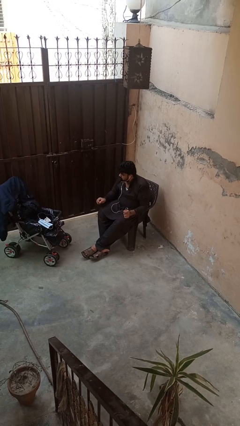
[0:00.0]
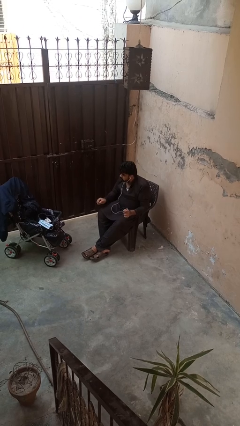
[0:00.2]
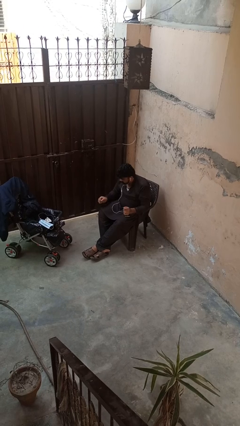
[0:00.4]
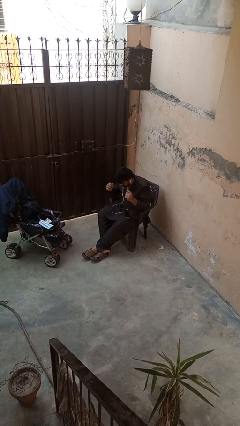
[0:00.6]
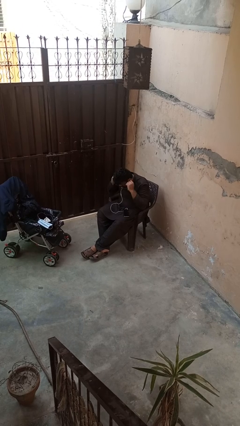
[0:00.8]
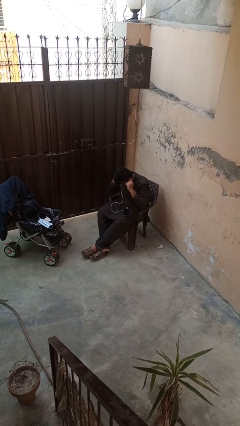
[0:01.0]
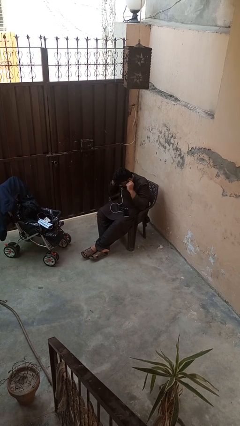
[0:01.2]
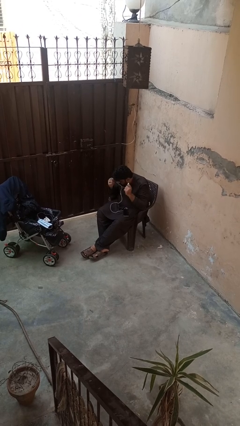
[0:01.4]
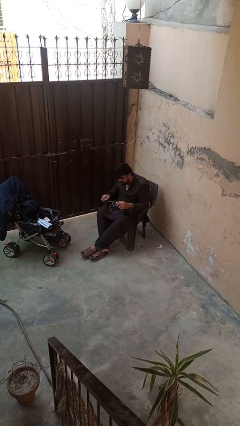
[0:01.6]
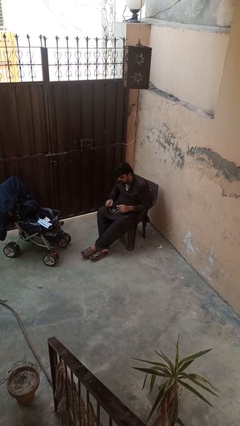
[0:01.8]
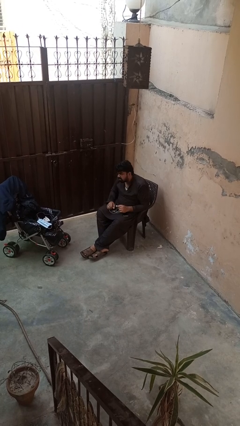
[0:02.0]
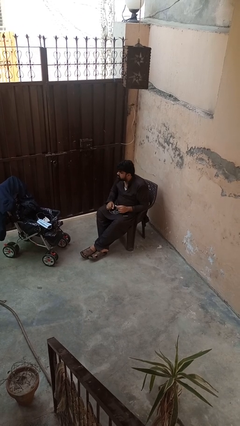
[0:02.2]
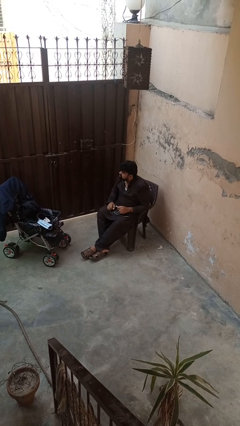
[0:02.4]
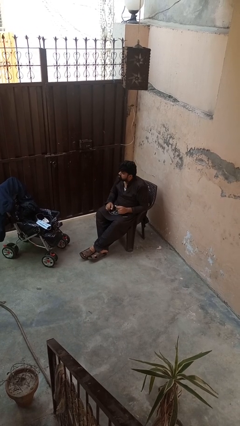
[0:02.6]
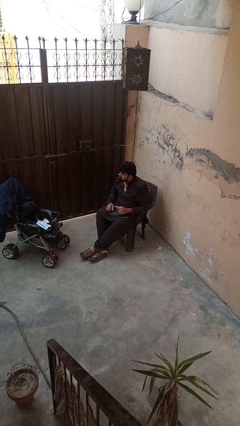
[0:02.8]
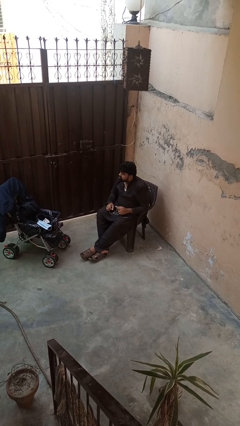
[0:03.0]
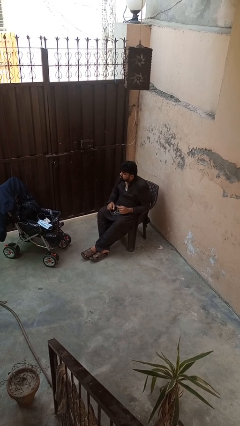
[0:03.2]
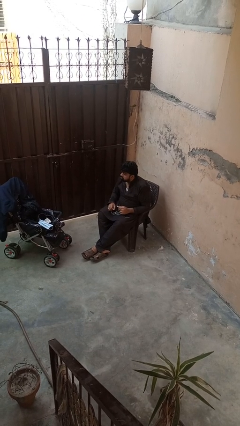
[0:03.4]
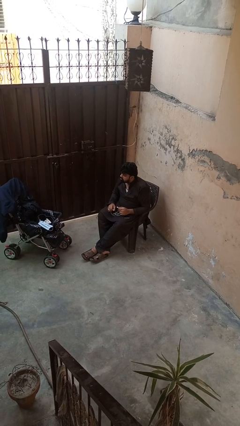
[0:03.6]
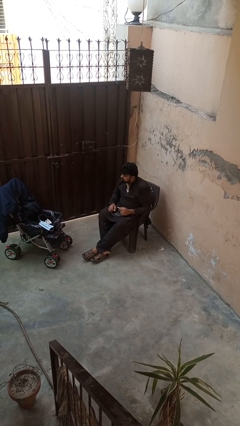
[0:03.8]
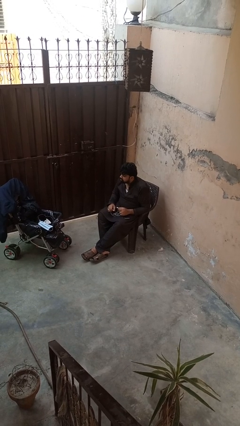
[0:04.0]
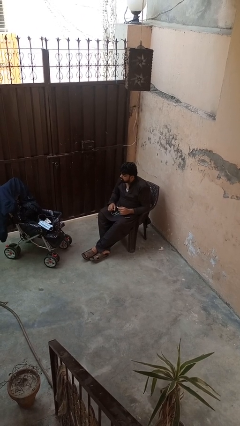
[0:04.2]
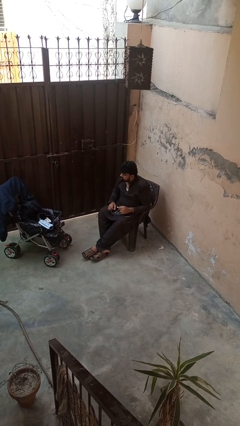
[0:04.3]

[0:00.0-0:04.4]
person takes off headphones

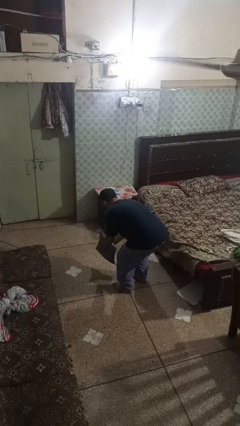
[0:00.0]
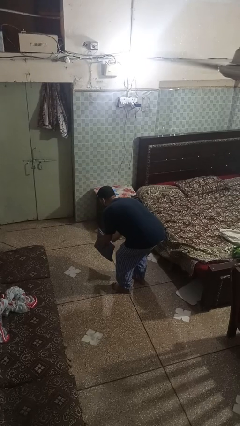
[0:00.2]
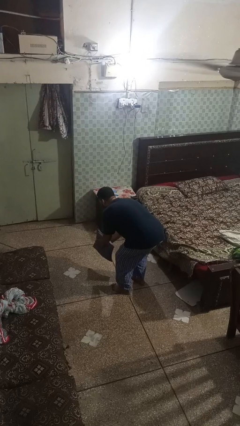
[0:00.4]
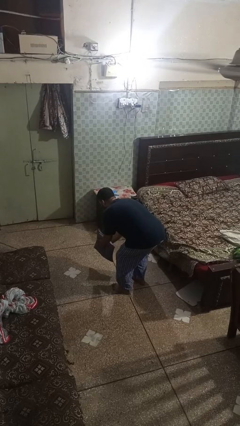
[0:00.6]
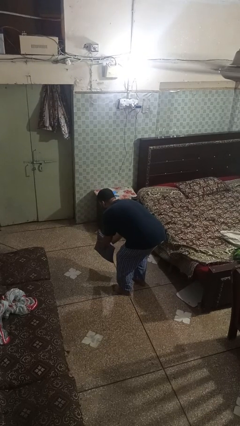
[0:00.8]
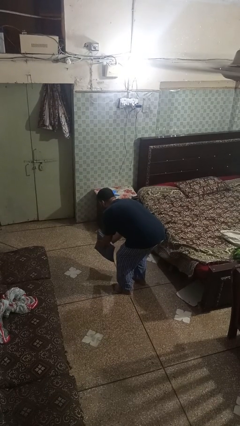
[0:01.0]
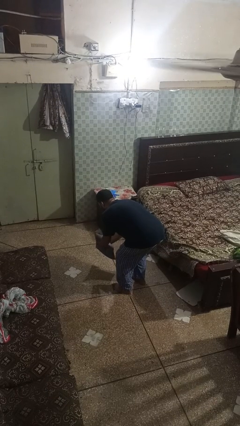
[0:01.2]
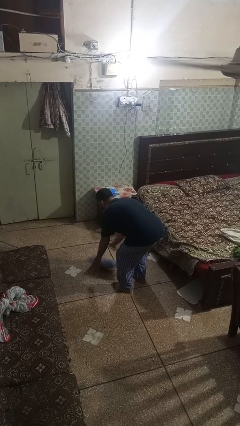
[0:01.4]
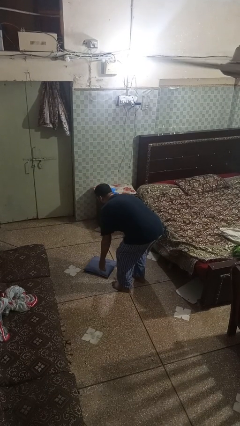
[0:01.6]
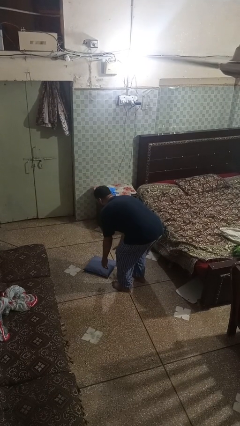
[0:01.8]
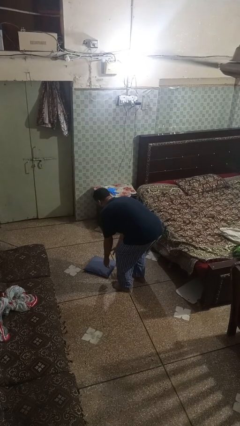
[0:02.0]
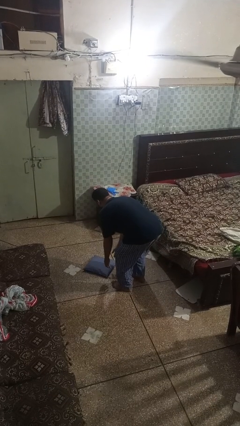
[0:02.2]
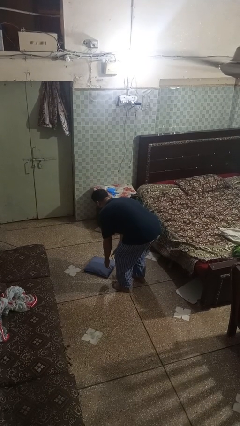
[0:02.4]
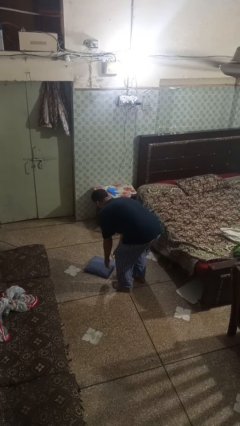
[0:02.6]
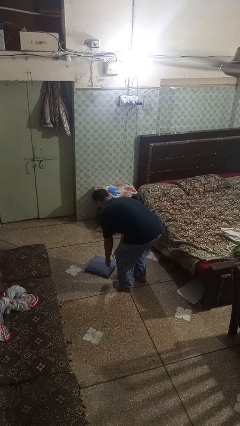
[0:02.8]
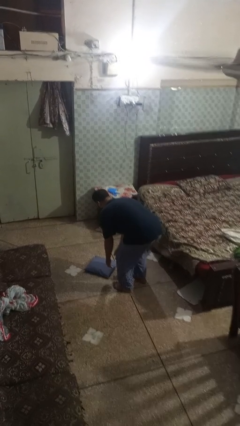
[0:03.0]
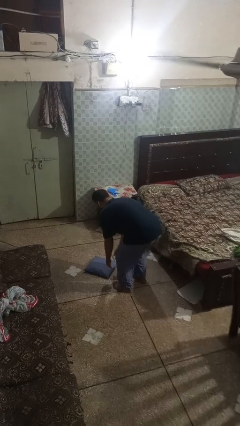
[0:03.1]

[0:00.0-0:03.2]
person catches dropped object

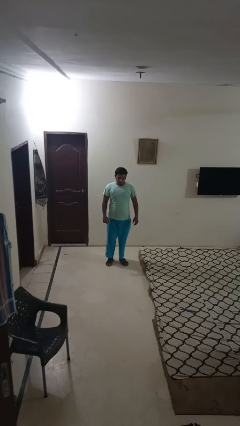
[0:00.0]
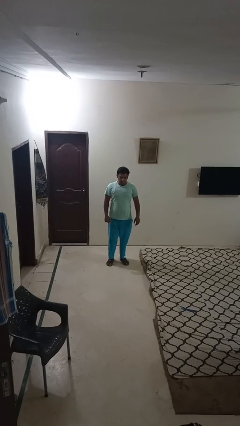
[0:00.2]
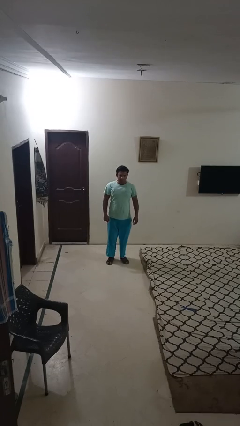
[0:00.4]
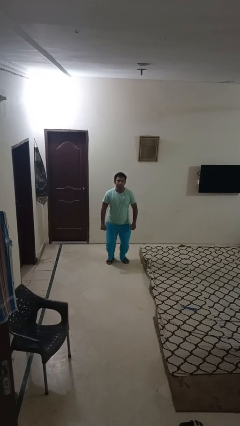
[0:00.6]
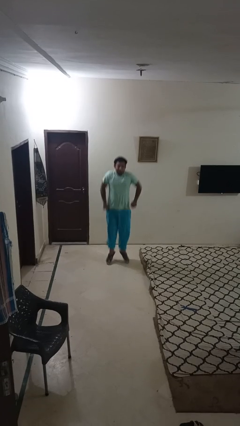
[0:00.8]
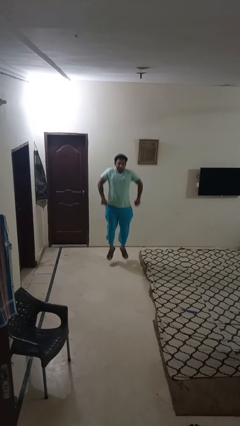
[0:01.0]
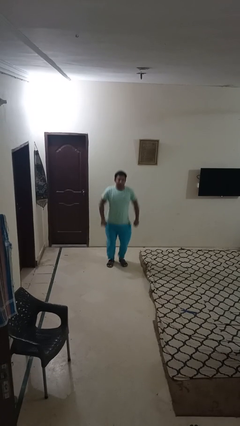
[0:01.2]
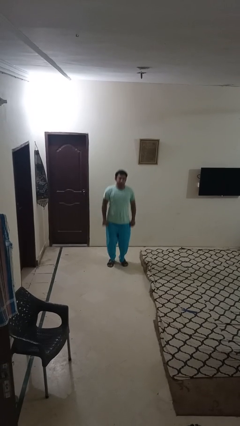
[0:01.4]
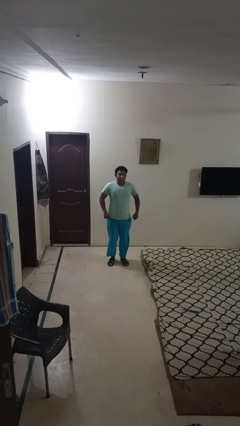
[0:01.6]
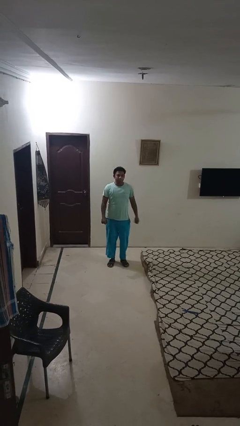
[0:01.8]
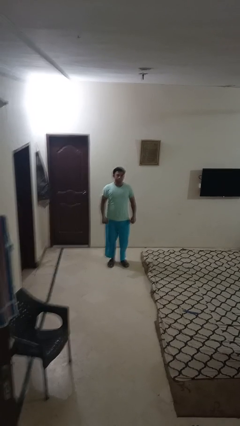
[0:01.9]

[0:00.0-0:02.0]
person jumps

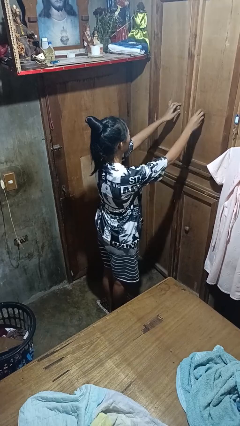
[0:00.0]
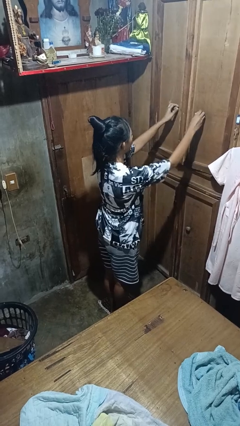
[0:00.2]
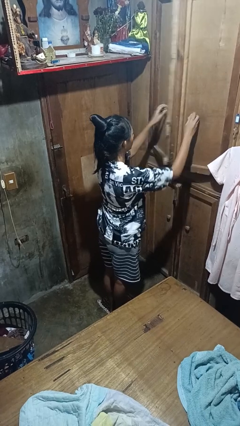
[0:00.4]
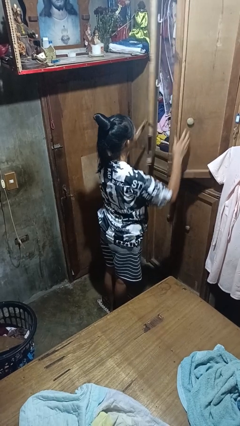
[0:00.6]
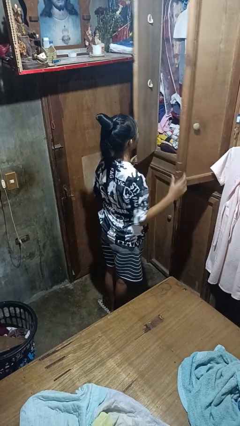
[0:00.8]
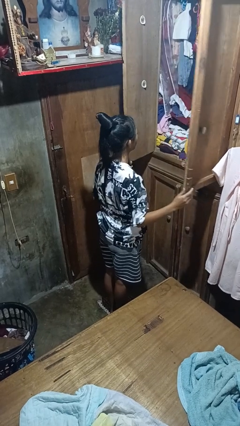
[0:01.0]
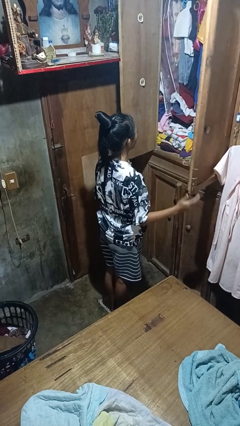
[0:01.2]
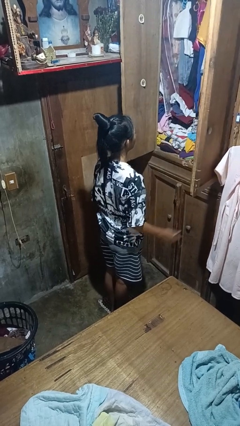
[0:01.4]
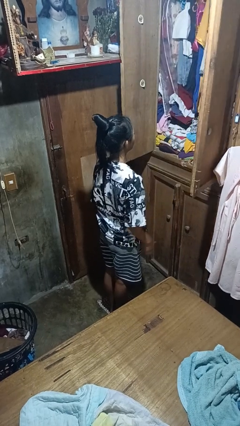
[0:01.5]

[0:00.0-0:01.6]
person opens closet door

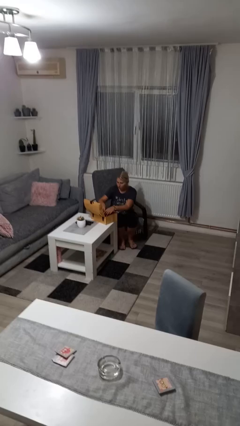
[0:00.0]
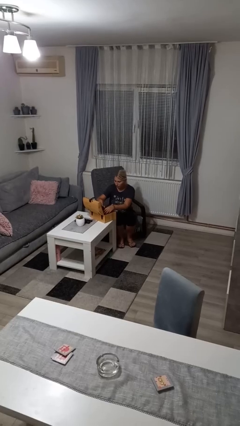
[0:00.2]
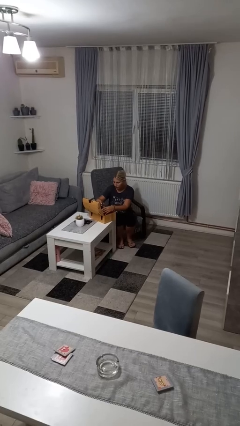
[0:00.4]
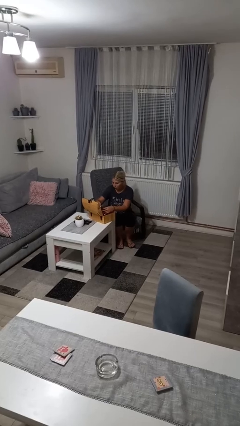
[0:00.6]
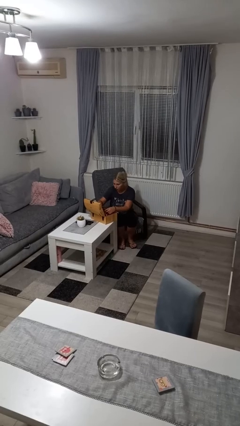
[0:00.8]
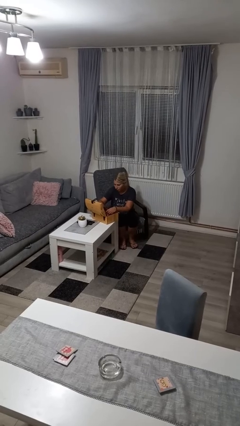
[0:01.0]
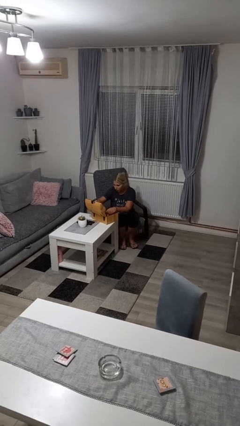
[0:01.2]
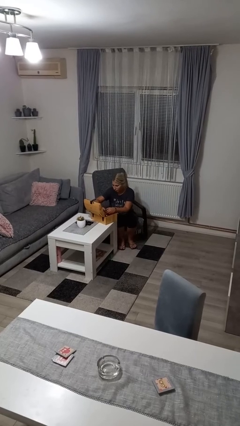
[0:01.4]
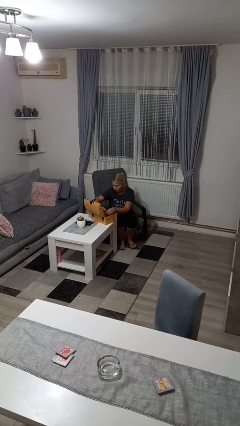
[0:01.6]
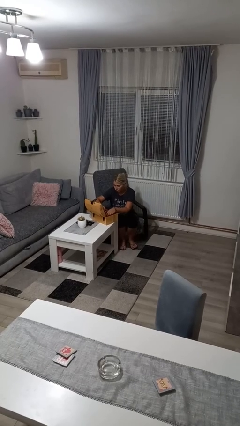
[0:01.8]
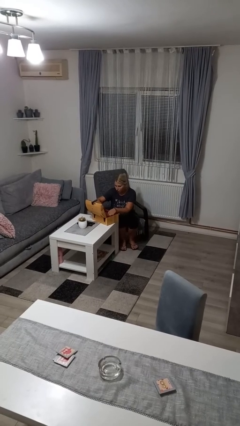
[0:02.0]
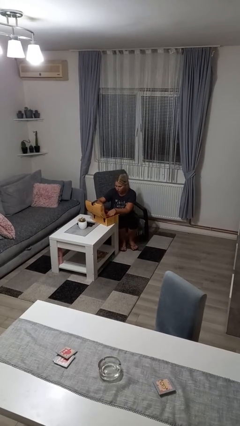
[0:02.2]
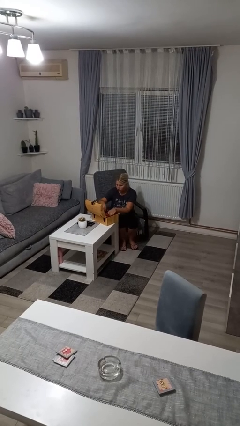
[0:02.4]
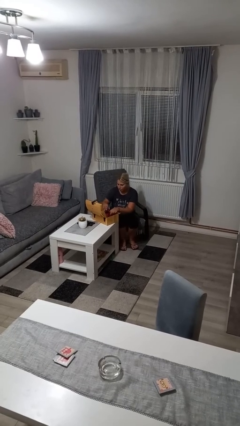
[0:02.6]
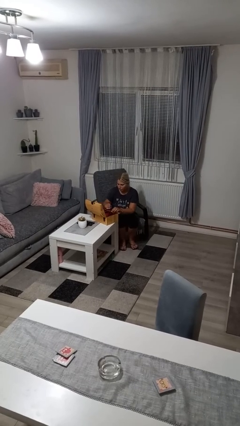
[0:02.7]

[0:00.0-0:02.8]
person searches jewelry box

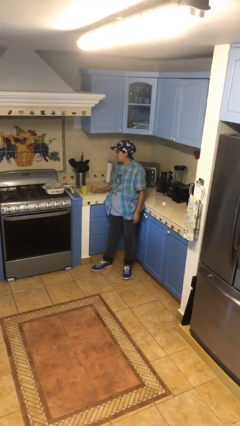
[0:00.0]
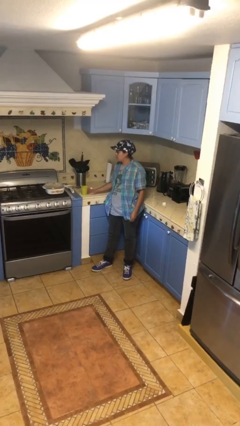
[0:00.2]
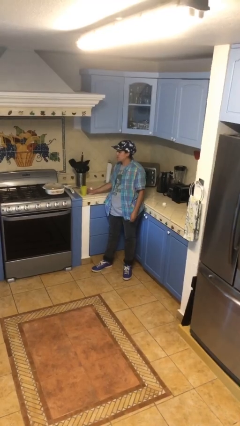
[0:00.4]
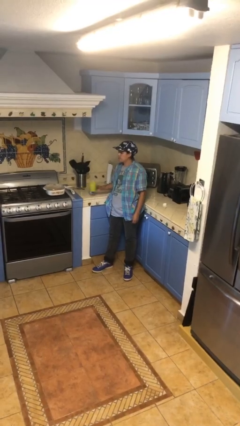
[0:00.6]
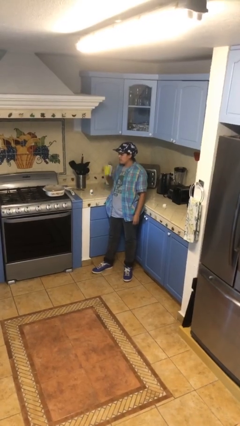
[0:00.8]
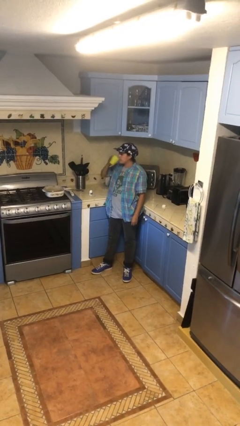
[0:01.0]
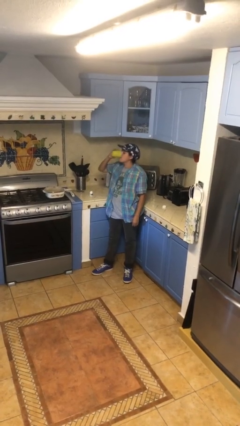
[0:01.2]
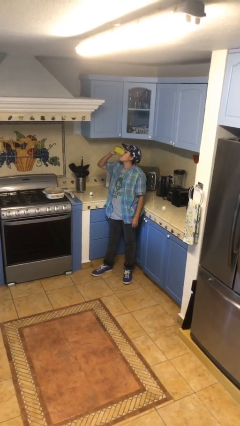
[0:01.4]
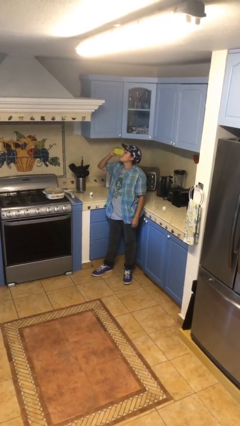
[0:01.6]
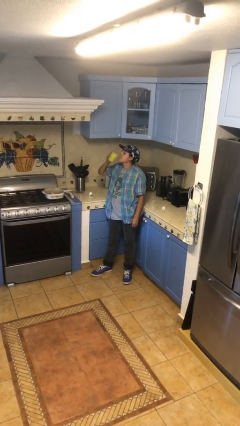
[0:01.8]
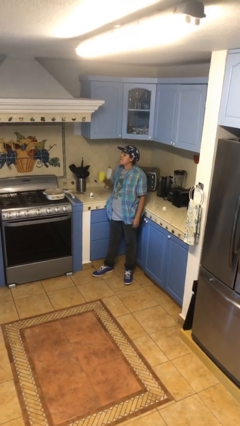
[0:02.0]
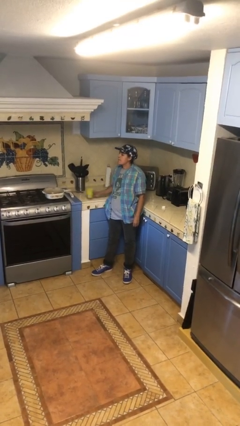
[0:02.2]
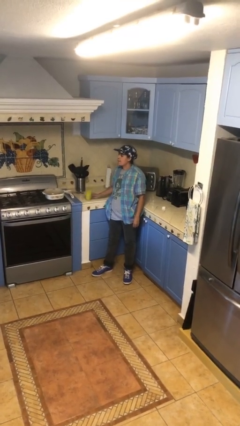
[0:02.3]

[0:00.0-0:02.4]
person drinks from cup

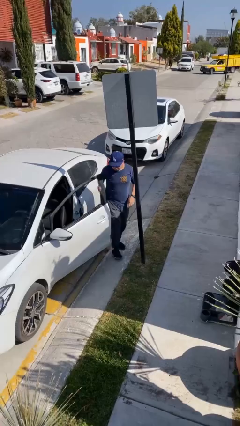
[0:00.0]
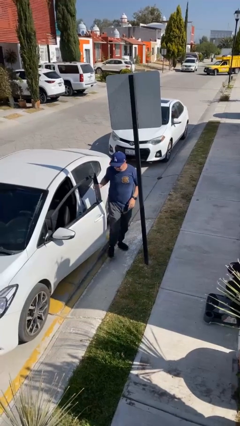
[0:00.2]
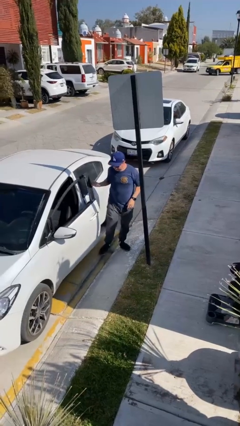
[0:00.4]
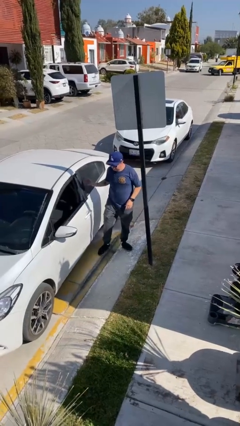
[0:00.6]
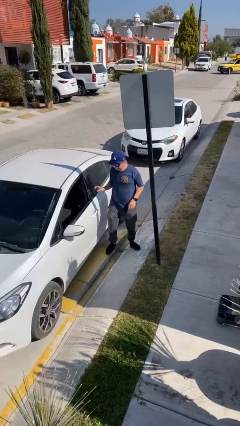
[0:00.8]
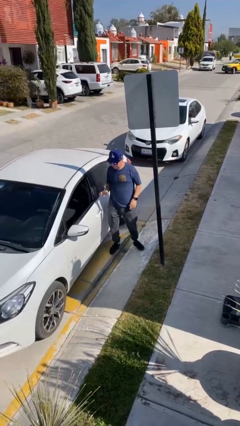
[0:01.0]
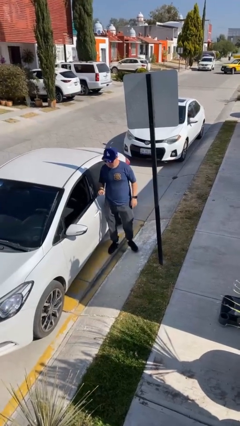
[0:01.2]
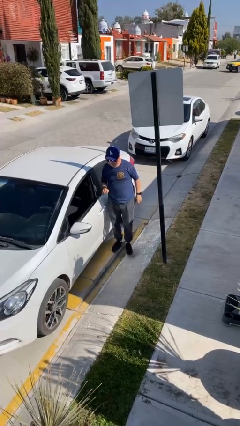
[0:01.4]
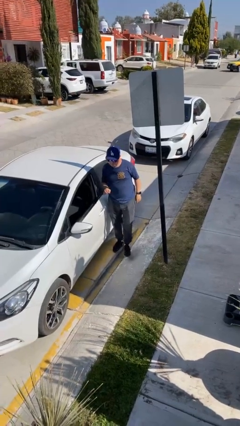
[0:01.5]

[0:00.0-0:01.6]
person closes car door
